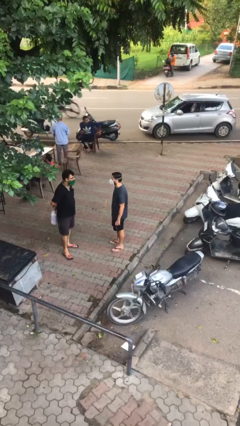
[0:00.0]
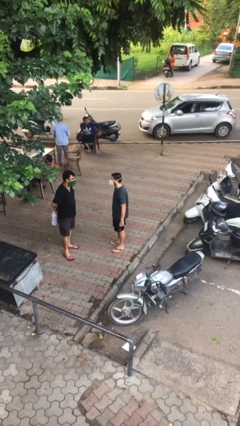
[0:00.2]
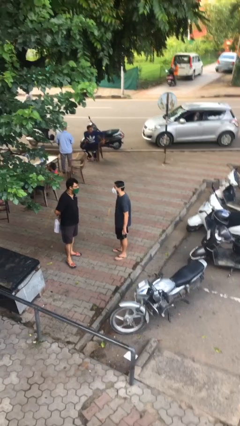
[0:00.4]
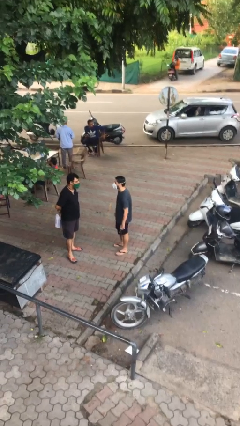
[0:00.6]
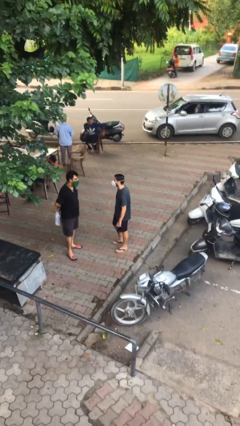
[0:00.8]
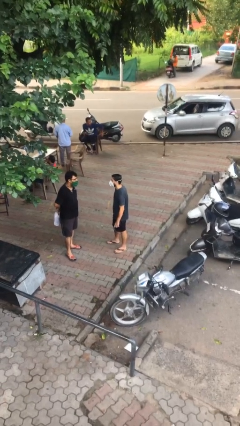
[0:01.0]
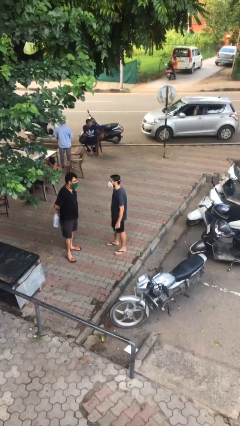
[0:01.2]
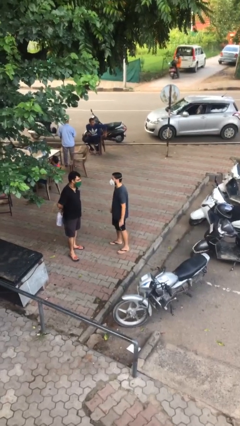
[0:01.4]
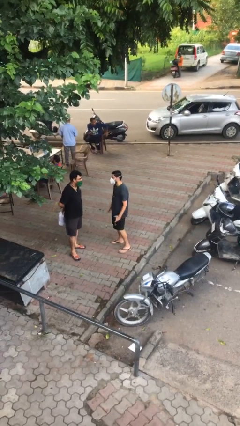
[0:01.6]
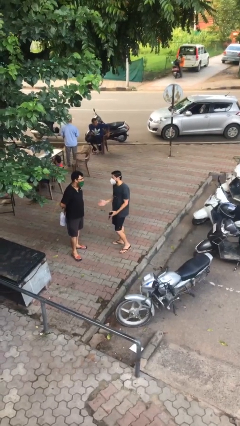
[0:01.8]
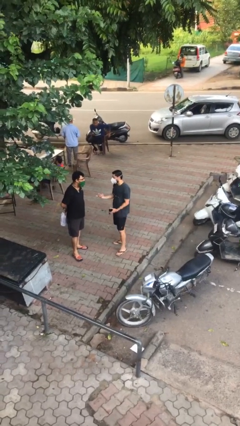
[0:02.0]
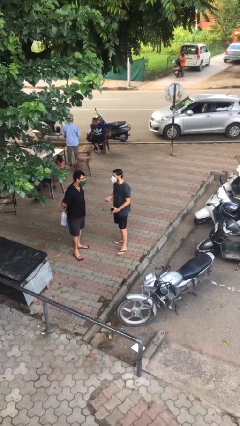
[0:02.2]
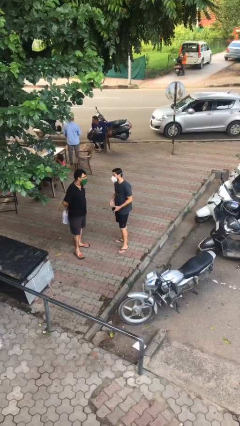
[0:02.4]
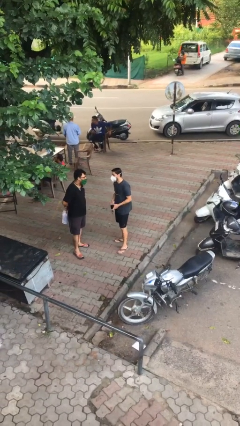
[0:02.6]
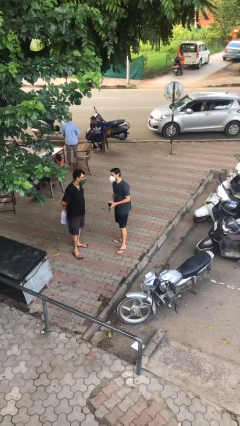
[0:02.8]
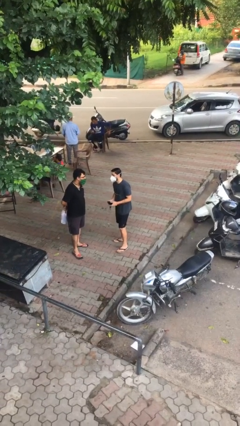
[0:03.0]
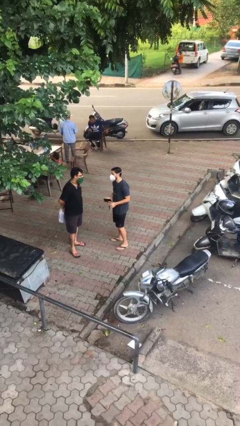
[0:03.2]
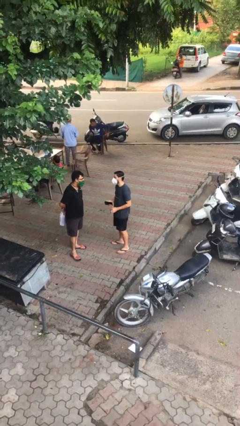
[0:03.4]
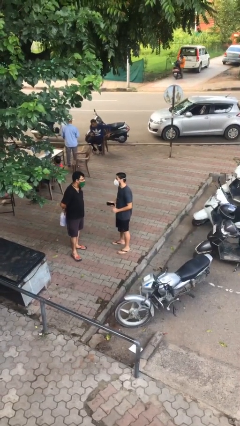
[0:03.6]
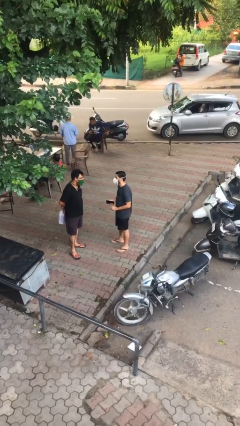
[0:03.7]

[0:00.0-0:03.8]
person talks to person

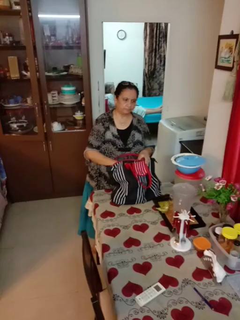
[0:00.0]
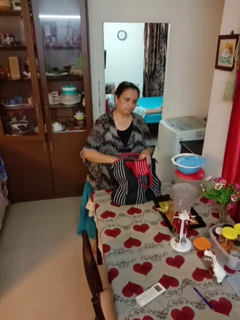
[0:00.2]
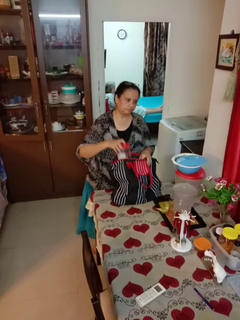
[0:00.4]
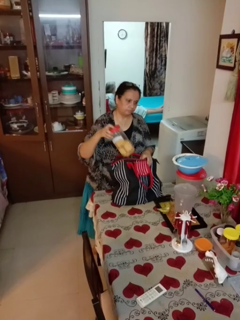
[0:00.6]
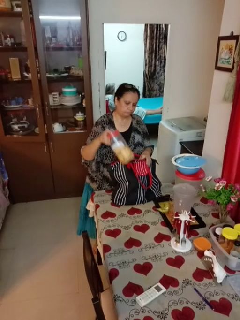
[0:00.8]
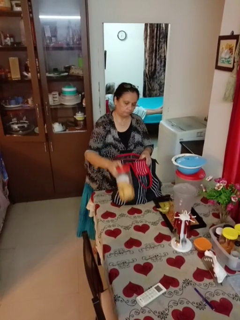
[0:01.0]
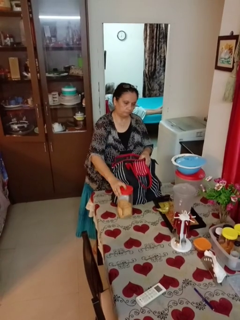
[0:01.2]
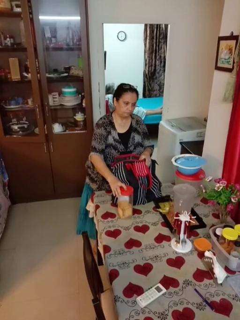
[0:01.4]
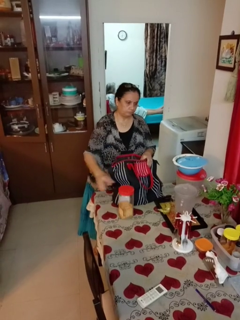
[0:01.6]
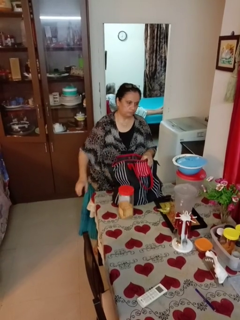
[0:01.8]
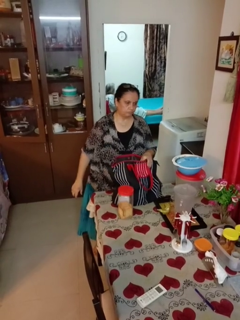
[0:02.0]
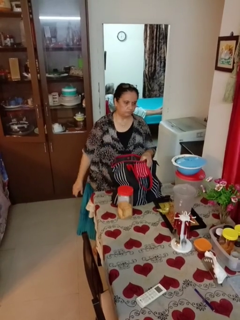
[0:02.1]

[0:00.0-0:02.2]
person takes object from bag

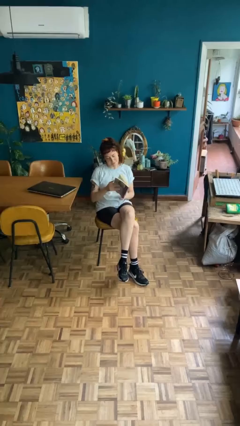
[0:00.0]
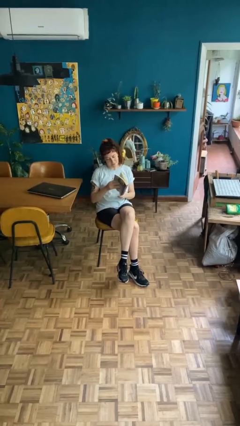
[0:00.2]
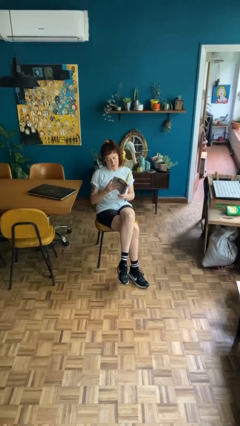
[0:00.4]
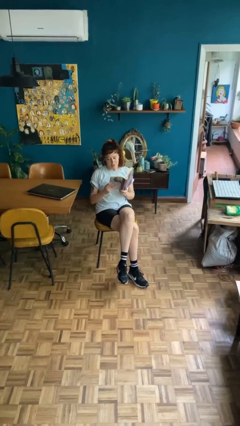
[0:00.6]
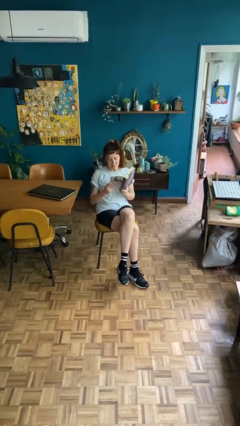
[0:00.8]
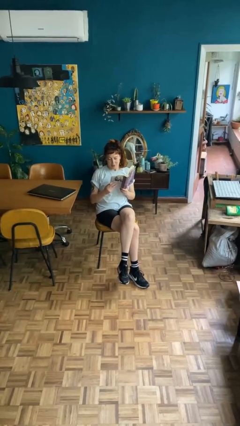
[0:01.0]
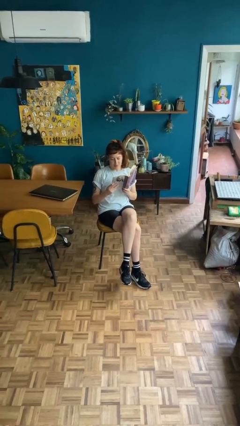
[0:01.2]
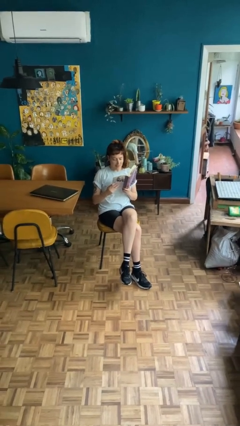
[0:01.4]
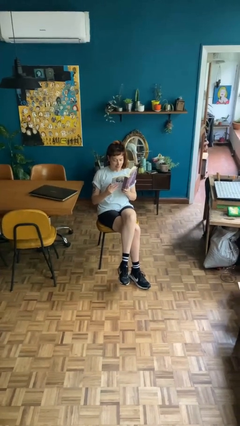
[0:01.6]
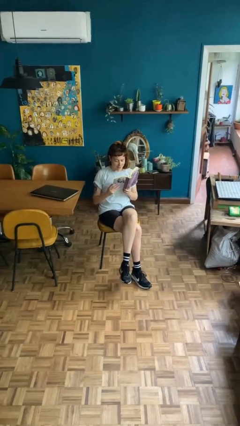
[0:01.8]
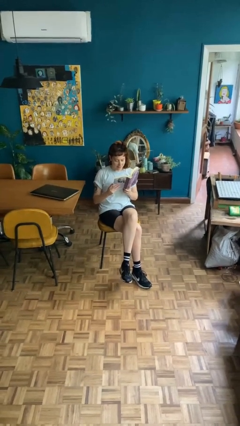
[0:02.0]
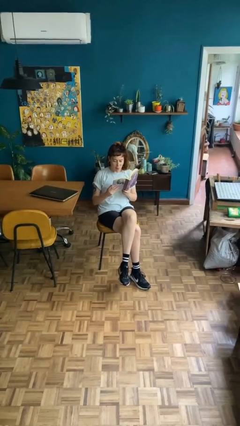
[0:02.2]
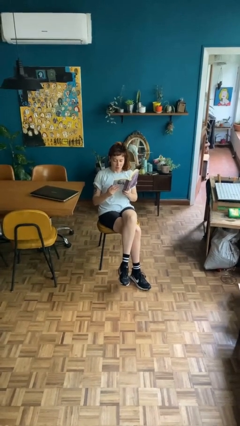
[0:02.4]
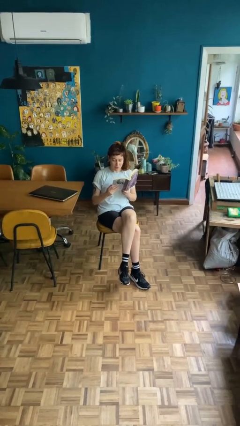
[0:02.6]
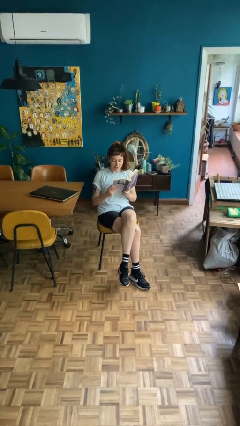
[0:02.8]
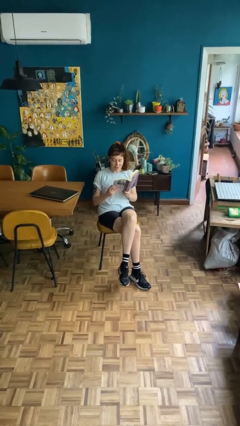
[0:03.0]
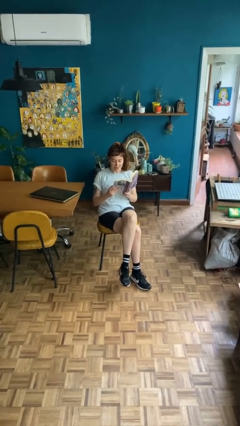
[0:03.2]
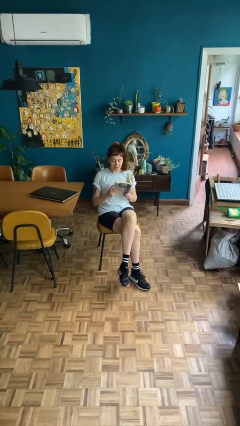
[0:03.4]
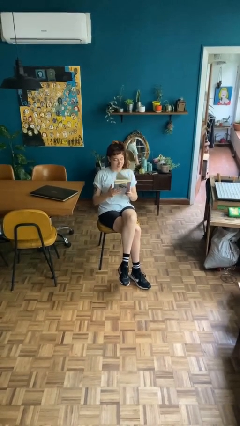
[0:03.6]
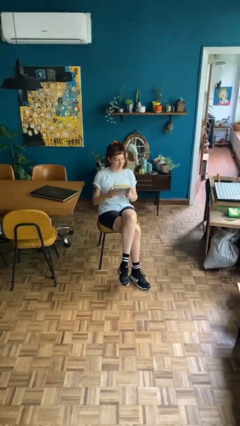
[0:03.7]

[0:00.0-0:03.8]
person reads document

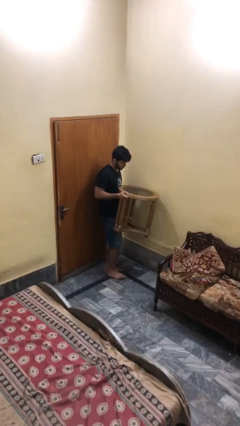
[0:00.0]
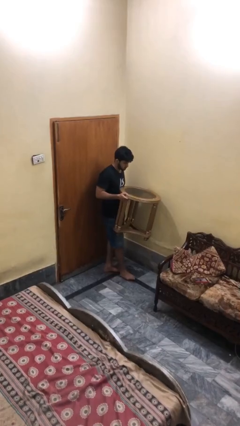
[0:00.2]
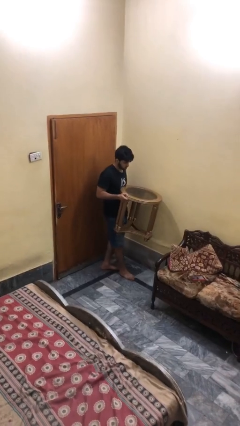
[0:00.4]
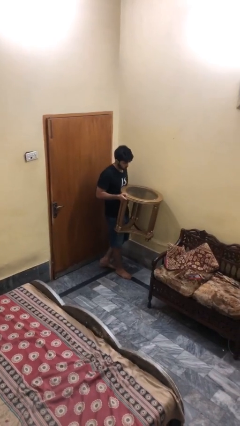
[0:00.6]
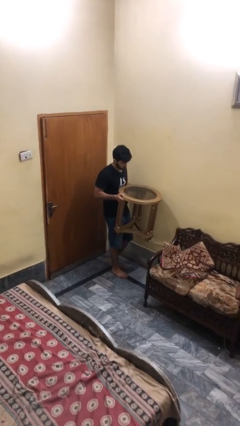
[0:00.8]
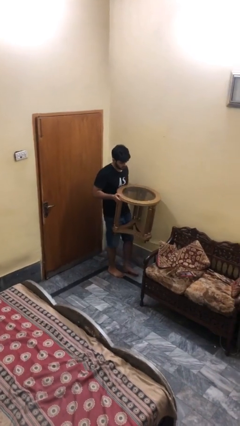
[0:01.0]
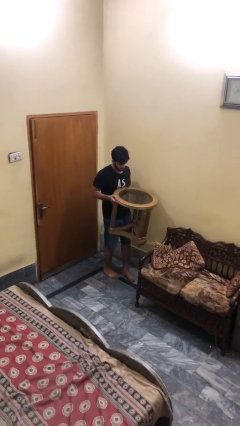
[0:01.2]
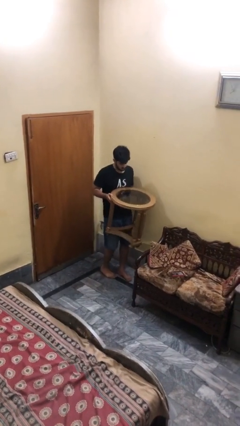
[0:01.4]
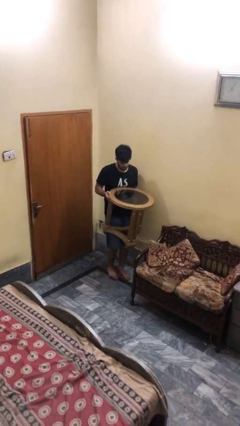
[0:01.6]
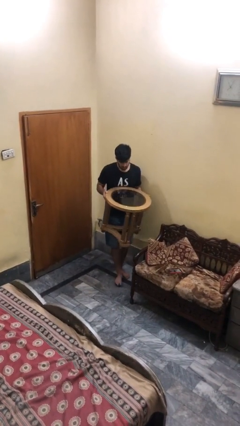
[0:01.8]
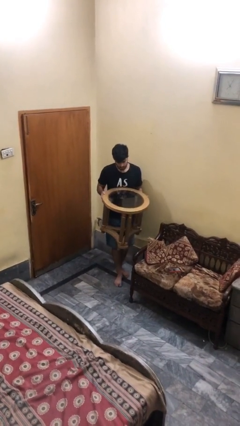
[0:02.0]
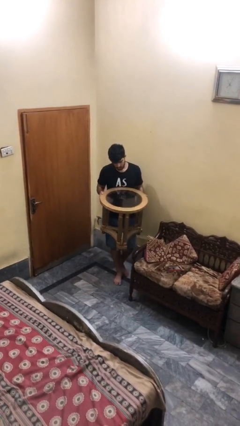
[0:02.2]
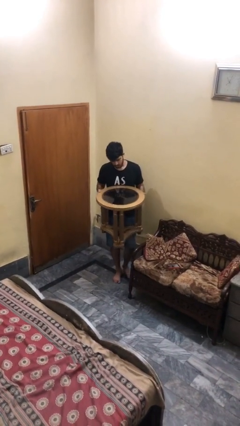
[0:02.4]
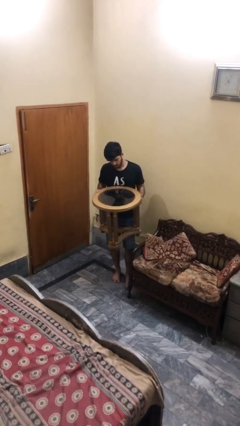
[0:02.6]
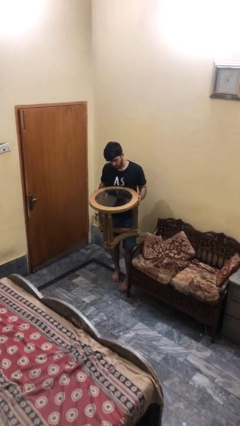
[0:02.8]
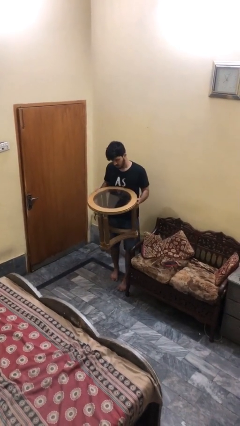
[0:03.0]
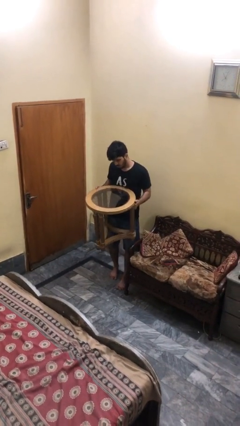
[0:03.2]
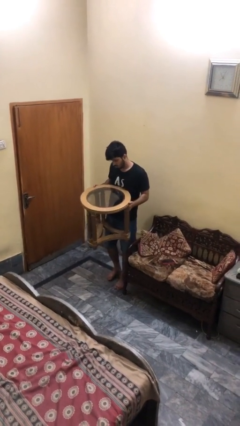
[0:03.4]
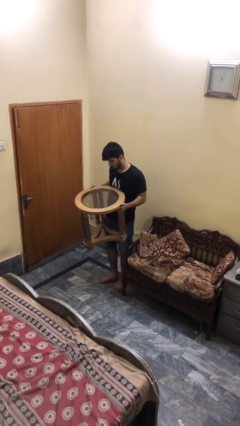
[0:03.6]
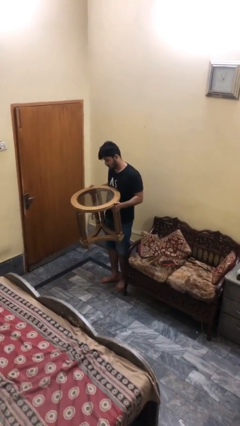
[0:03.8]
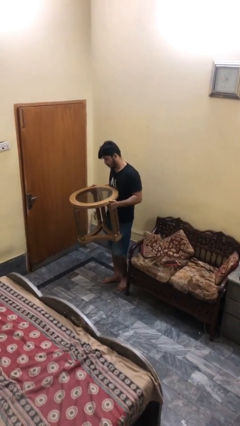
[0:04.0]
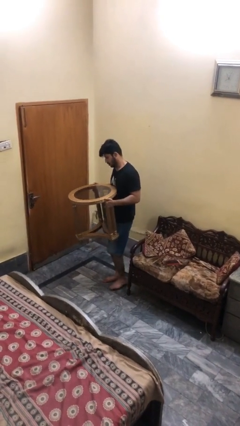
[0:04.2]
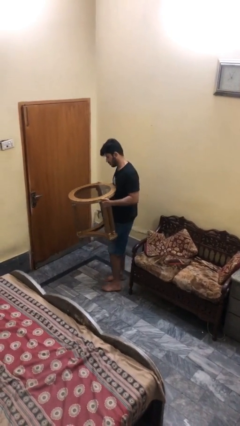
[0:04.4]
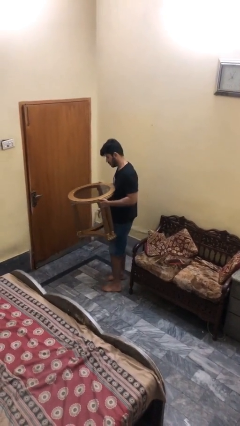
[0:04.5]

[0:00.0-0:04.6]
person carries furniture

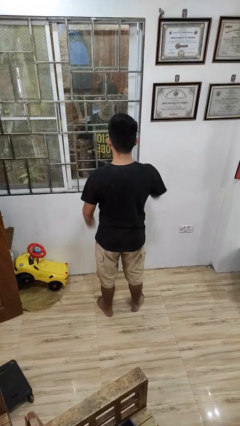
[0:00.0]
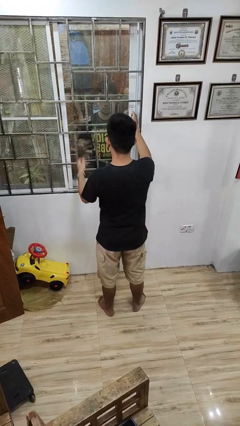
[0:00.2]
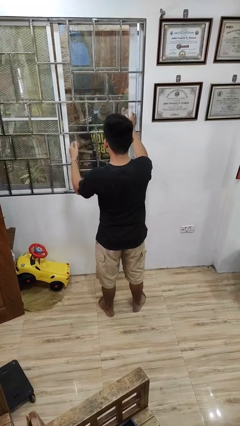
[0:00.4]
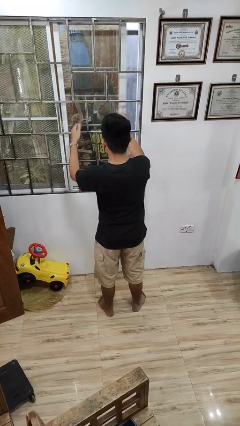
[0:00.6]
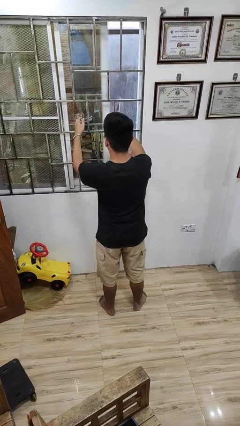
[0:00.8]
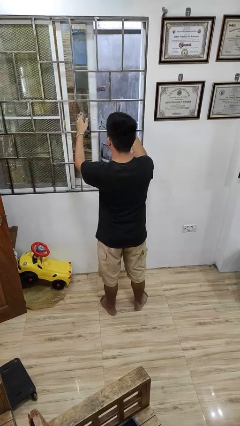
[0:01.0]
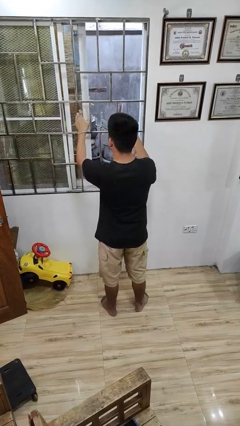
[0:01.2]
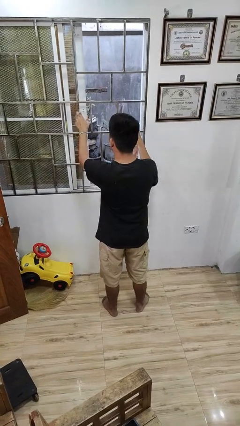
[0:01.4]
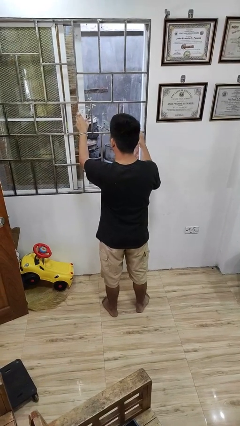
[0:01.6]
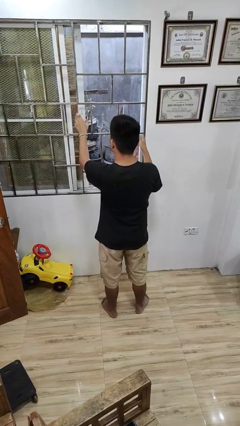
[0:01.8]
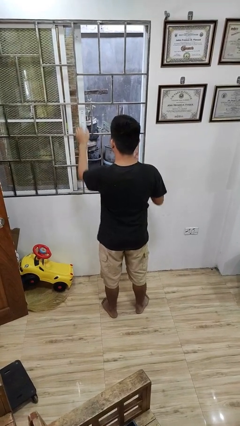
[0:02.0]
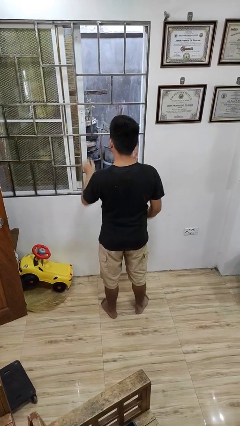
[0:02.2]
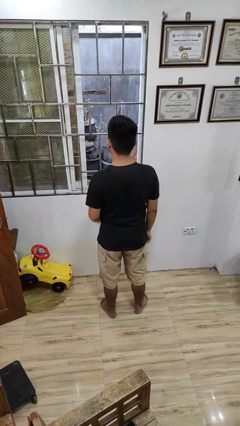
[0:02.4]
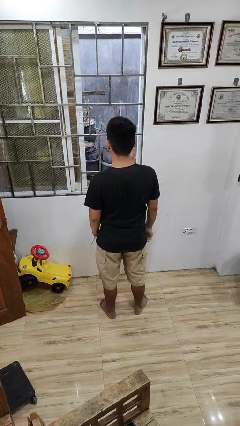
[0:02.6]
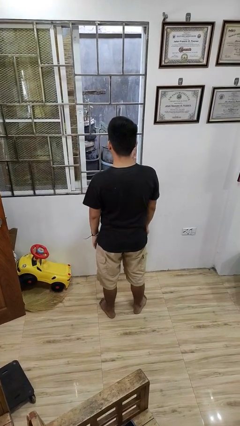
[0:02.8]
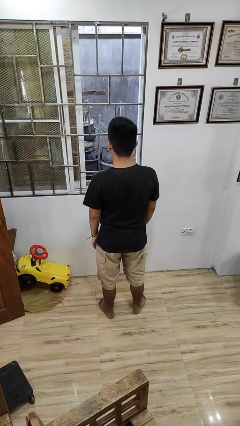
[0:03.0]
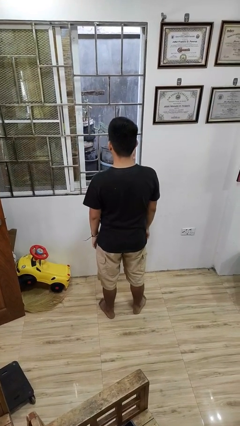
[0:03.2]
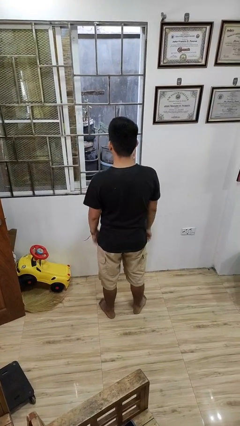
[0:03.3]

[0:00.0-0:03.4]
person opens home window

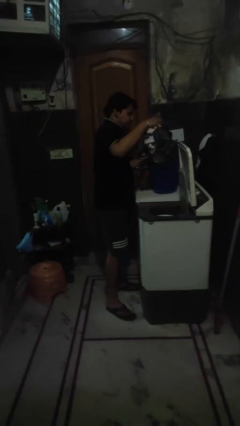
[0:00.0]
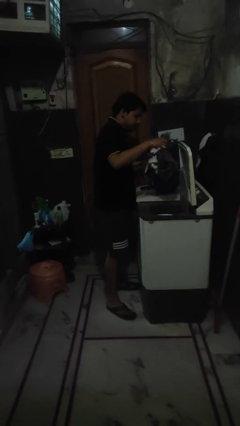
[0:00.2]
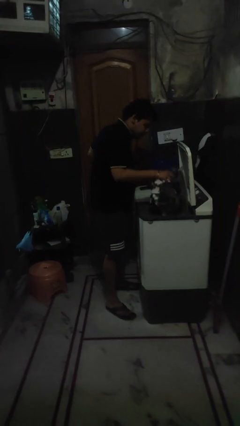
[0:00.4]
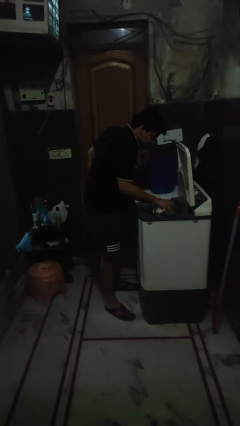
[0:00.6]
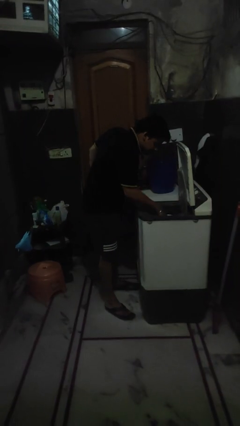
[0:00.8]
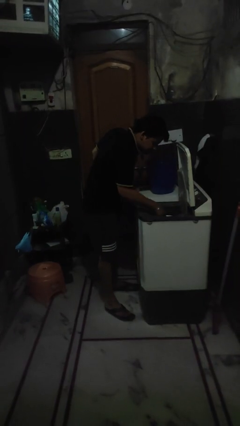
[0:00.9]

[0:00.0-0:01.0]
person loads clotheswasher
